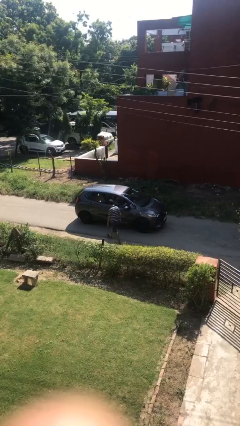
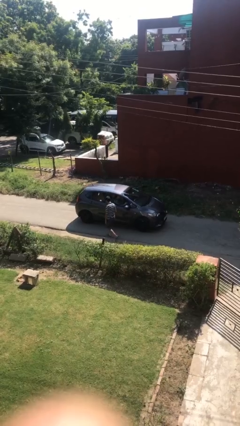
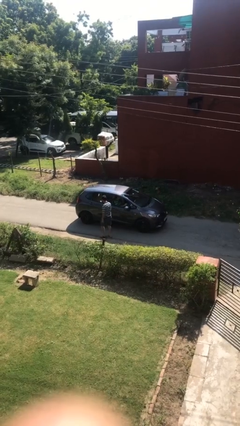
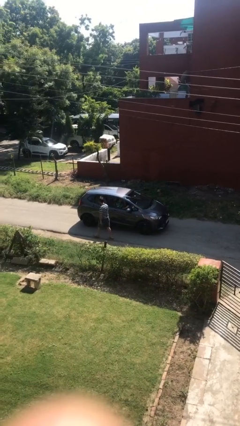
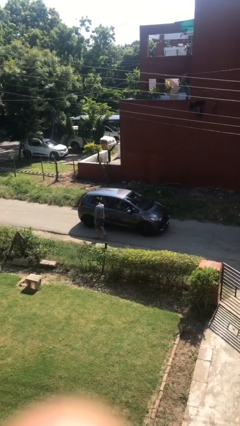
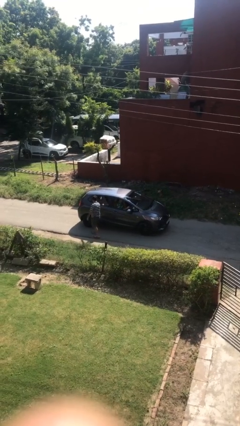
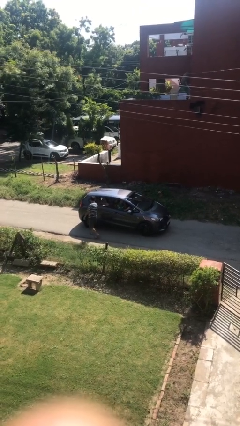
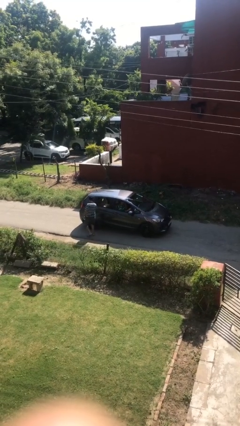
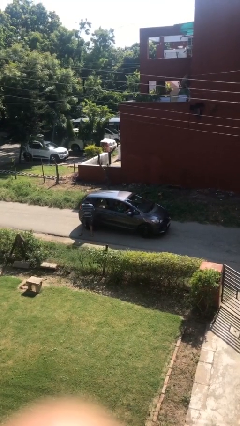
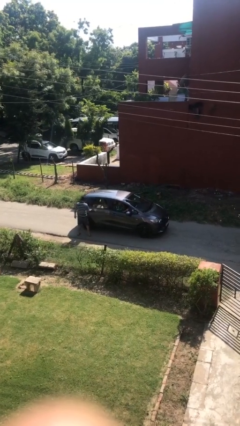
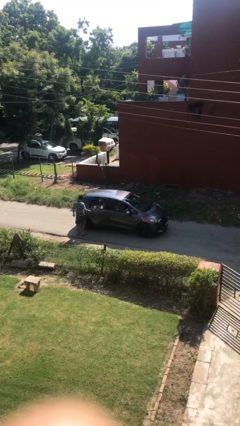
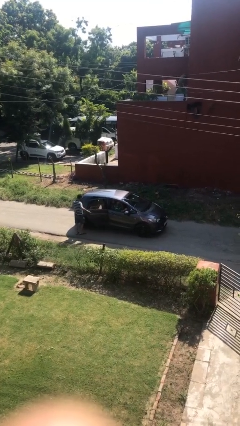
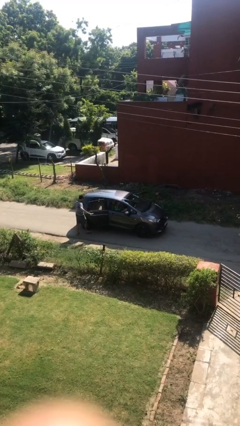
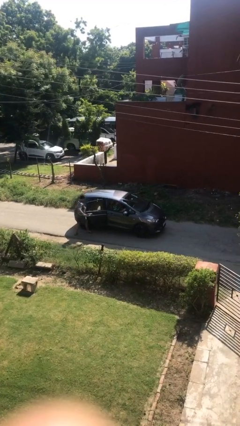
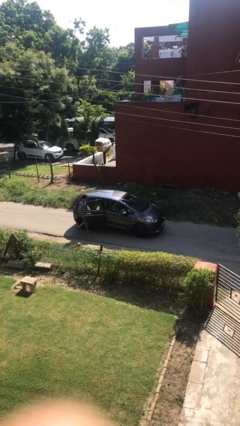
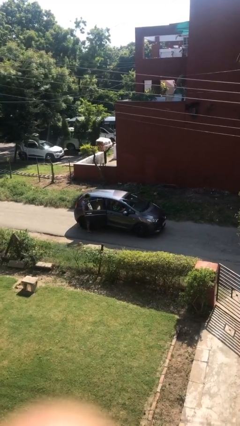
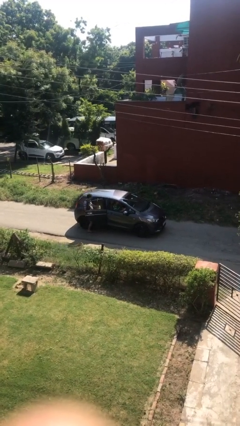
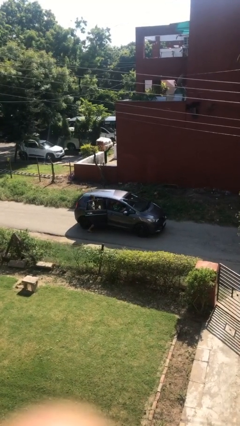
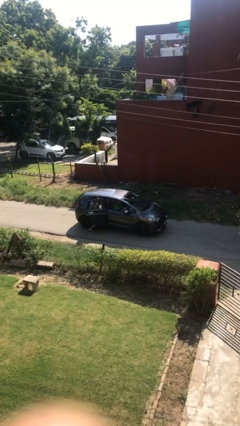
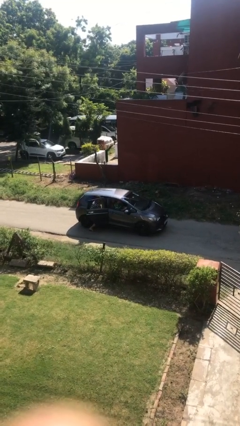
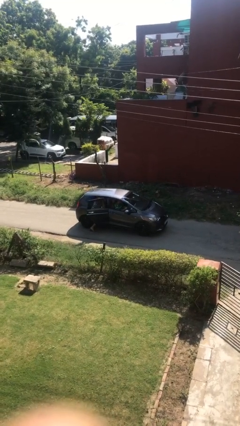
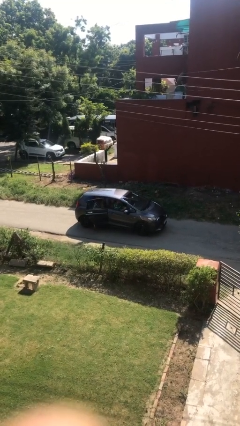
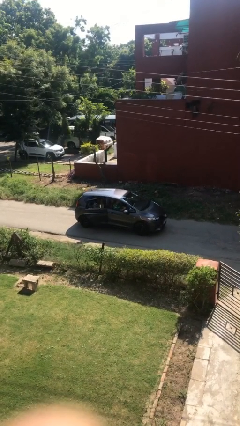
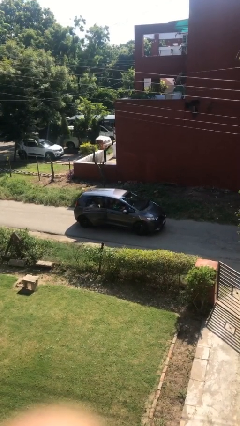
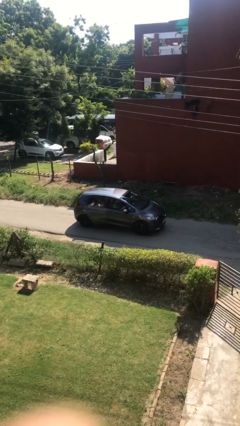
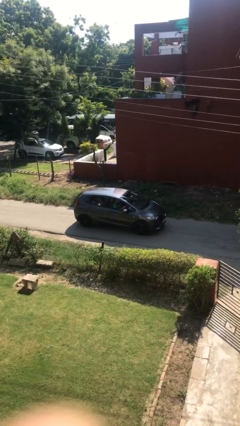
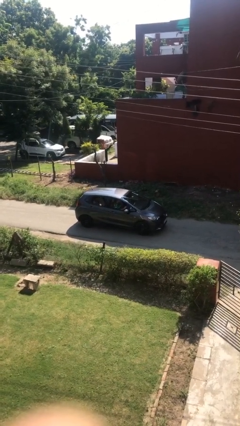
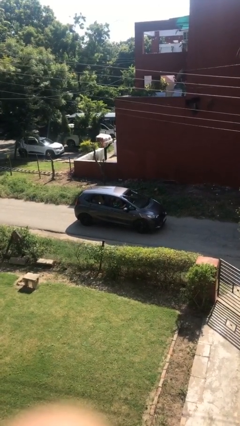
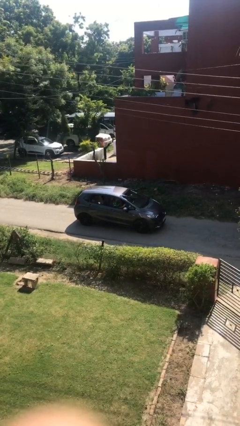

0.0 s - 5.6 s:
car picks up person

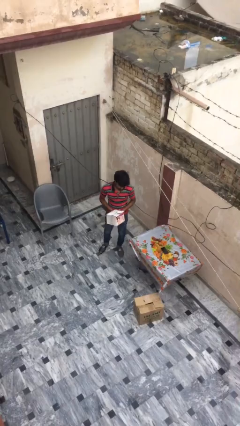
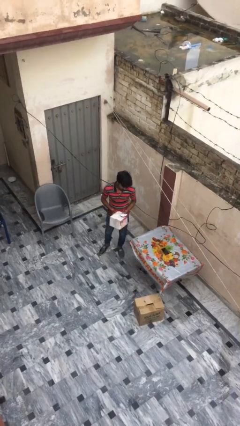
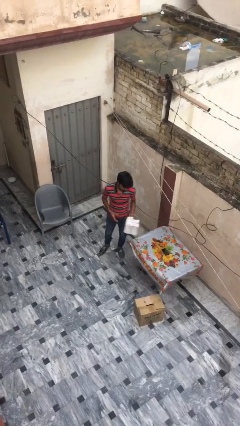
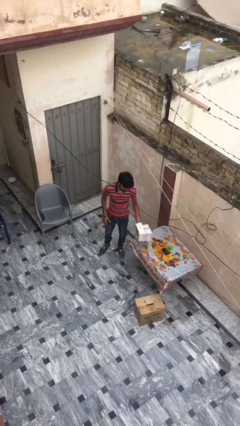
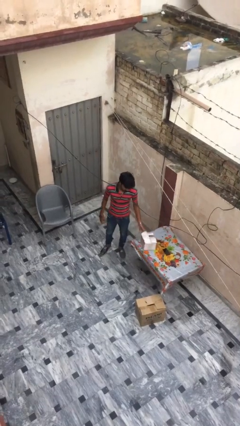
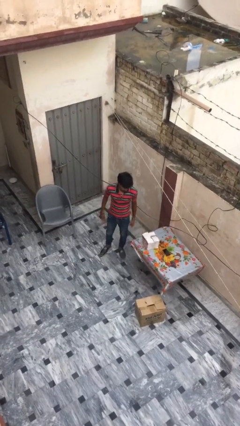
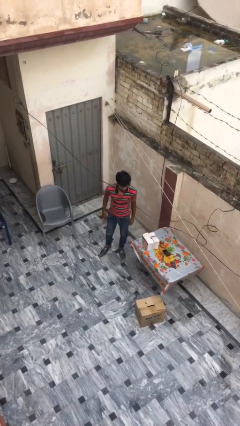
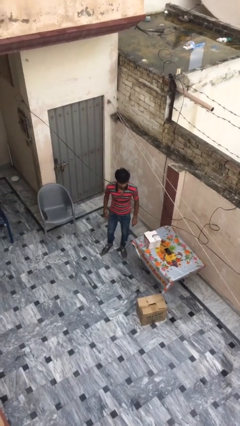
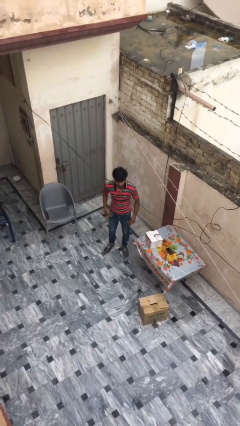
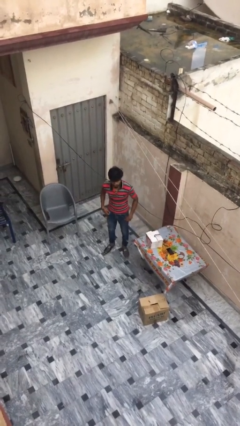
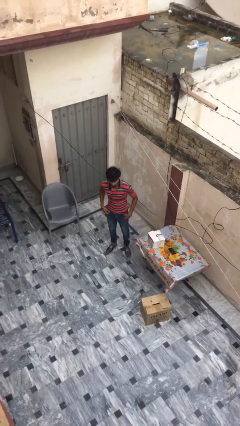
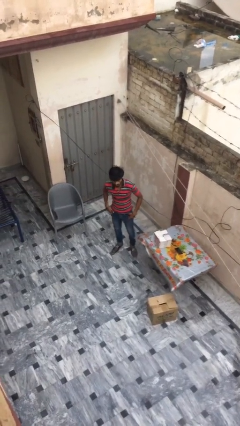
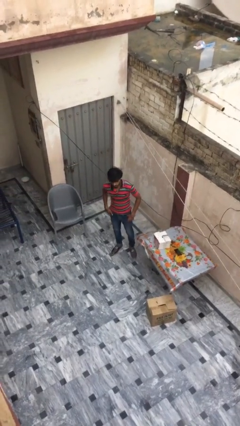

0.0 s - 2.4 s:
person puts down object on table

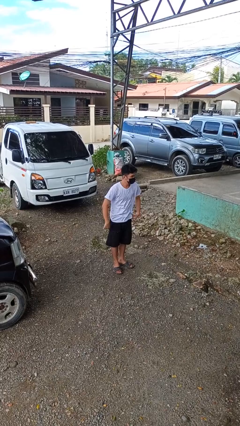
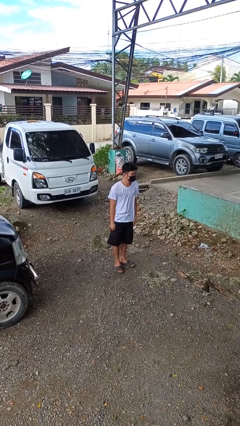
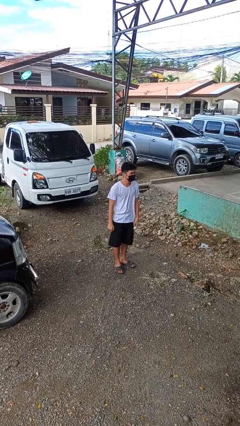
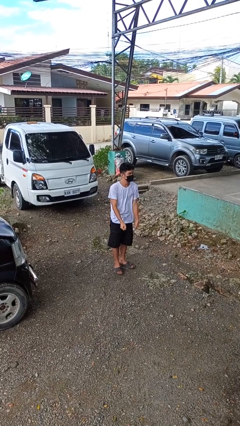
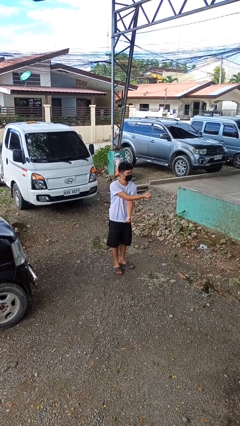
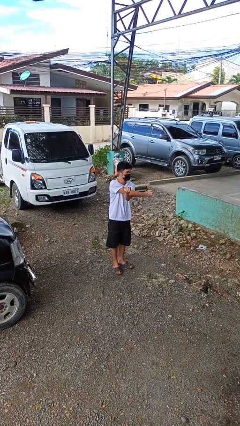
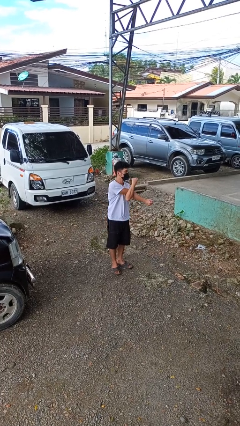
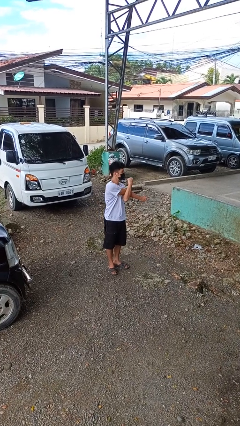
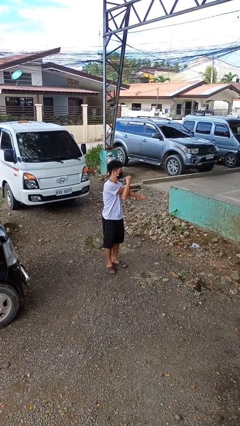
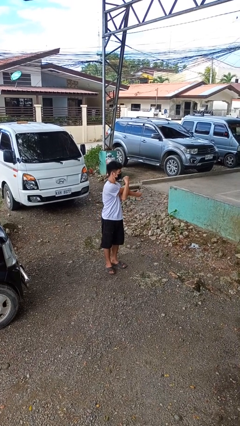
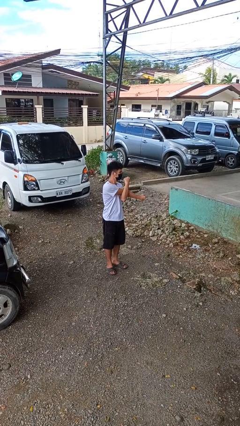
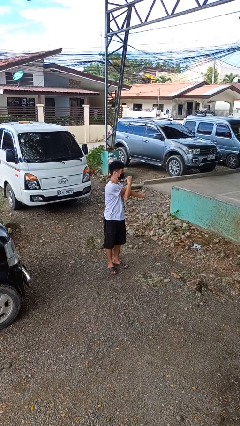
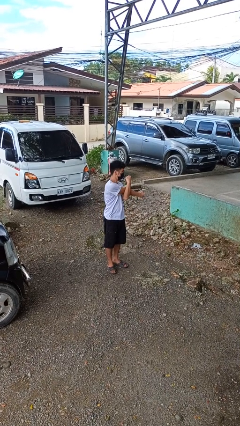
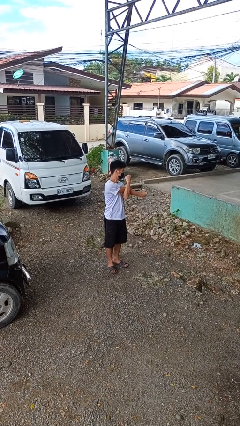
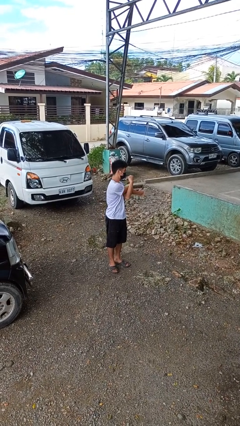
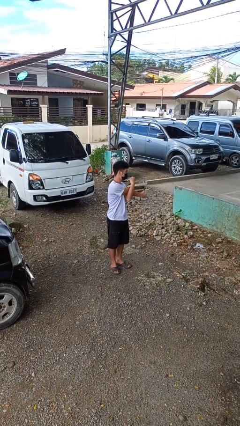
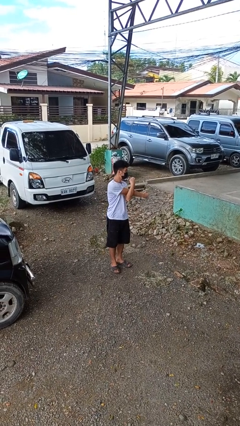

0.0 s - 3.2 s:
person stretches arms to side

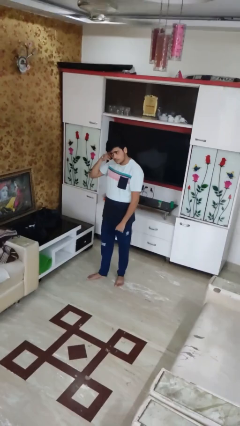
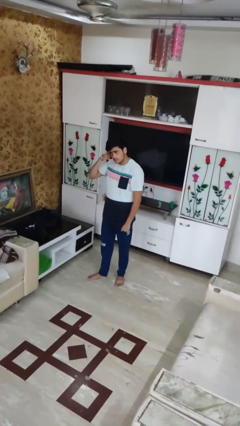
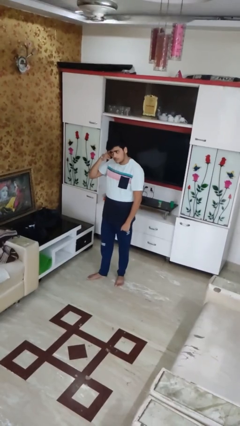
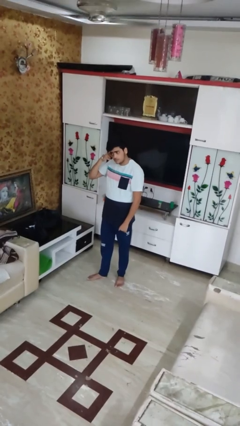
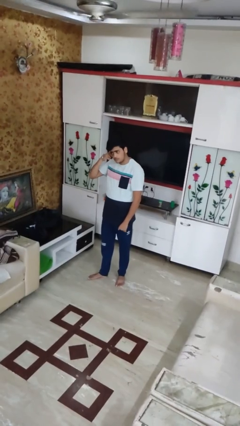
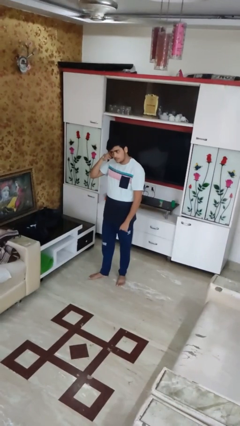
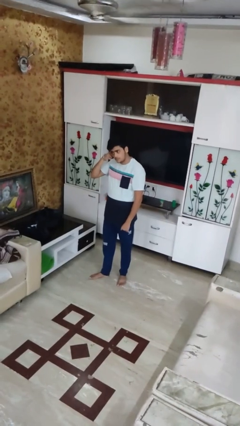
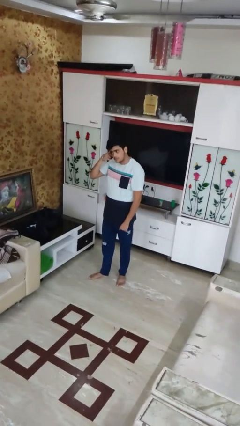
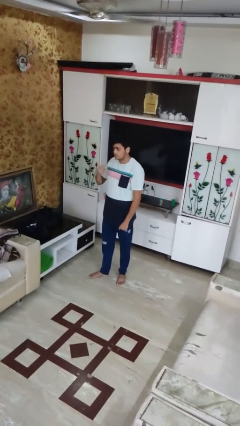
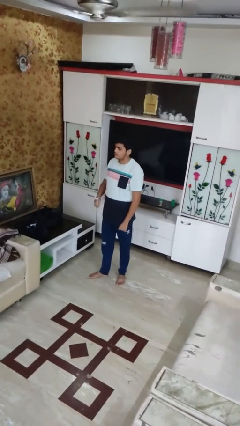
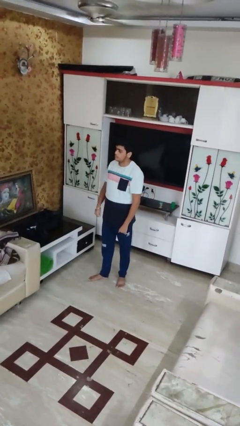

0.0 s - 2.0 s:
person gestures call me

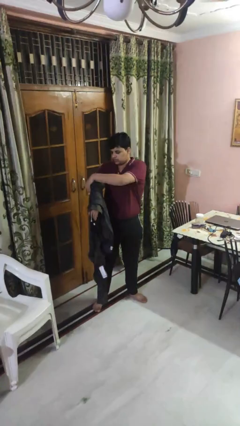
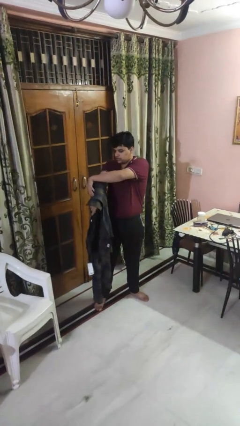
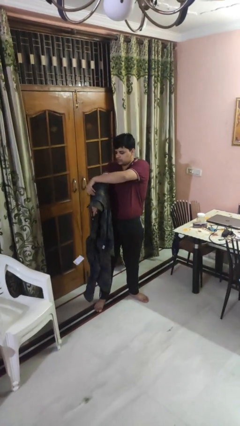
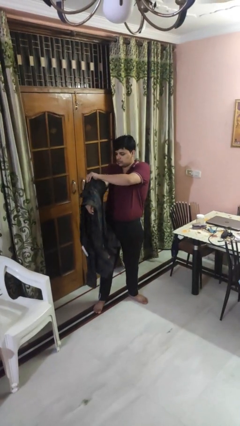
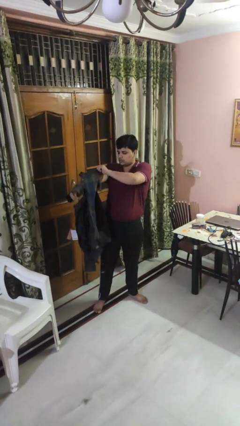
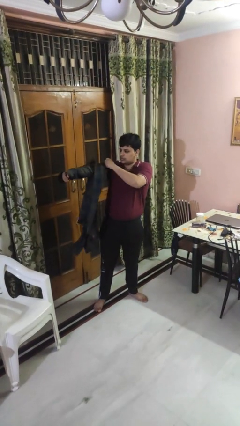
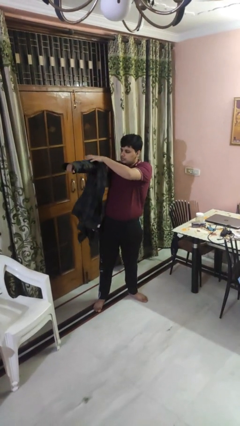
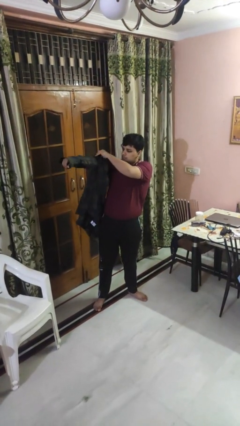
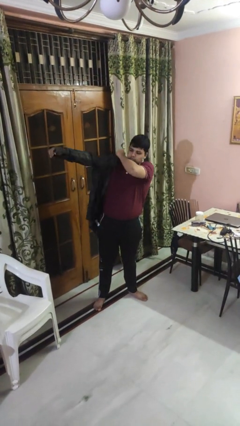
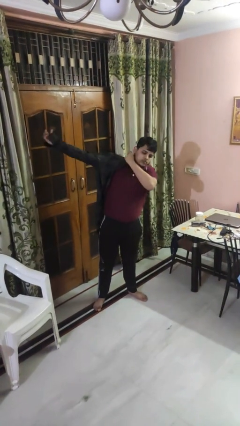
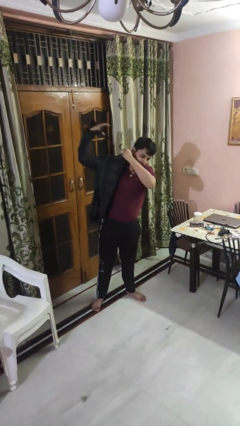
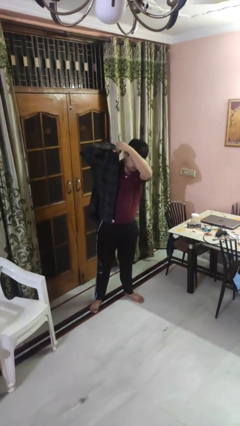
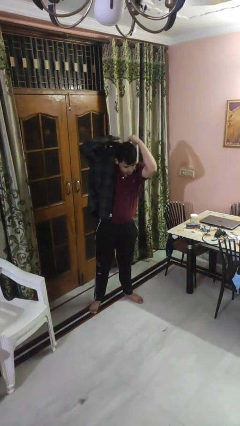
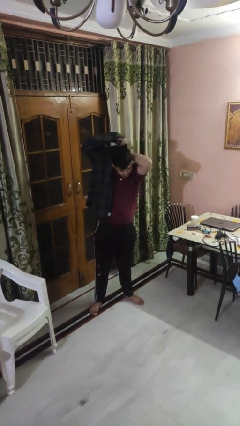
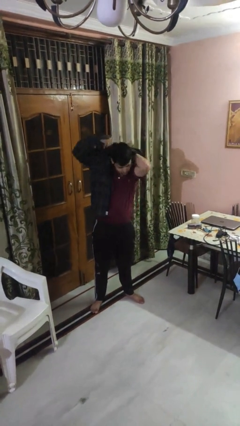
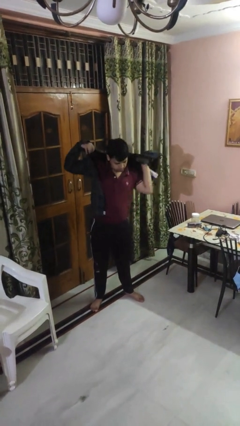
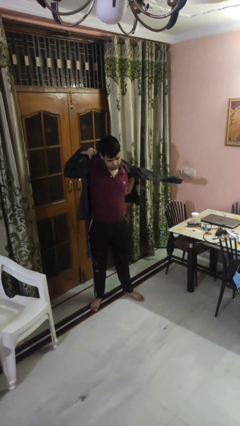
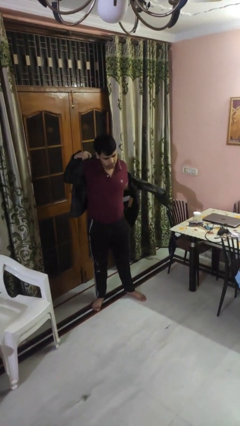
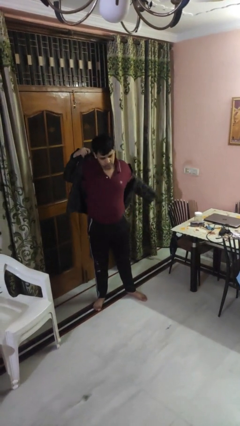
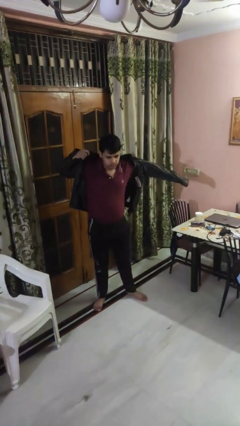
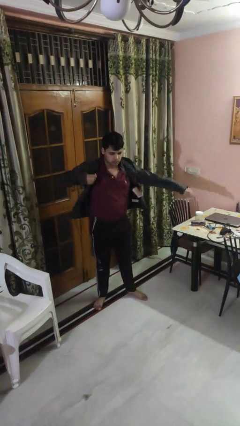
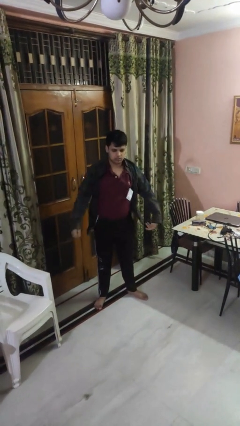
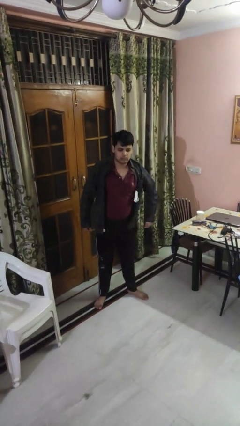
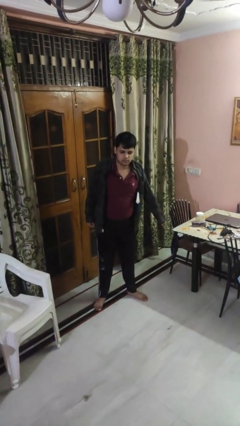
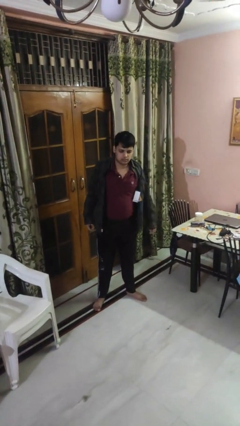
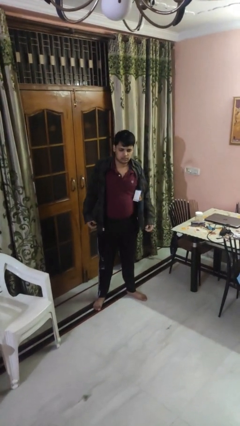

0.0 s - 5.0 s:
person puts on shirt
